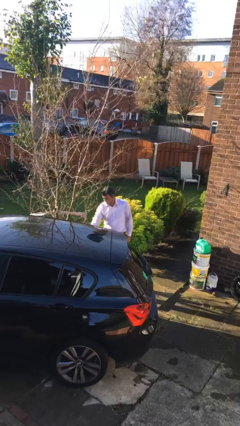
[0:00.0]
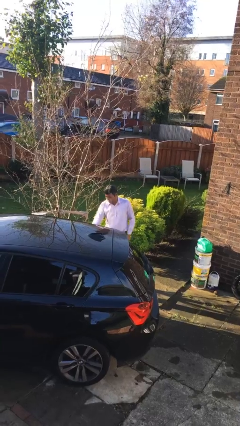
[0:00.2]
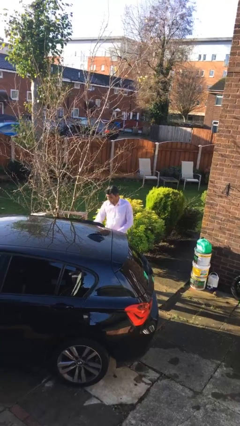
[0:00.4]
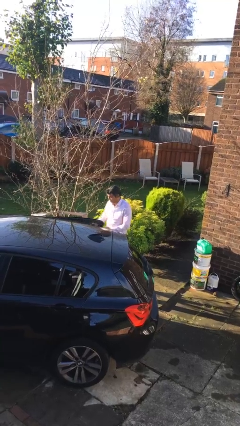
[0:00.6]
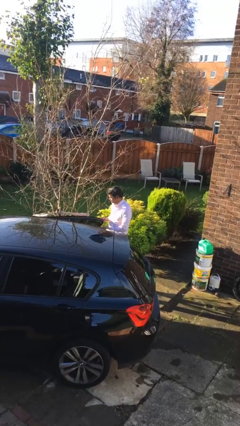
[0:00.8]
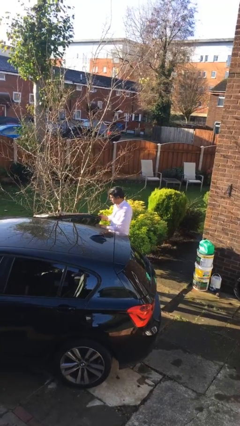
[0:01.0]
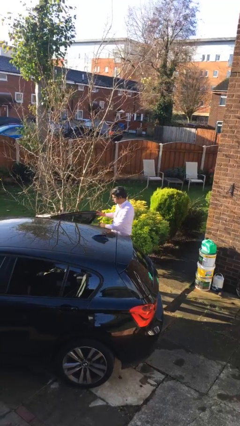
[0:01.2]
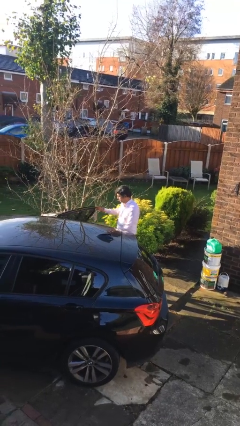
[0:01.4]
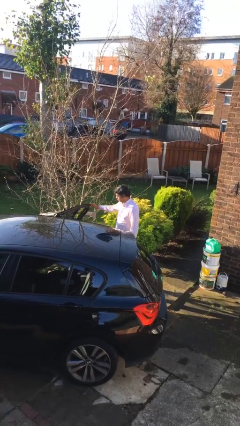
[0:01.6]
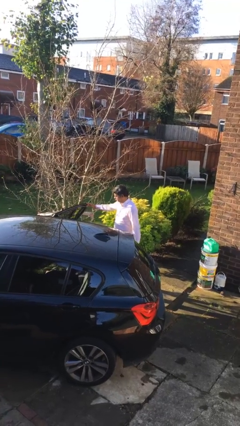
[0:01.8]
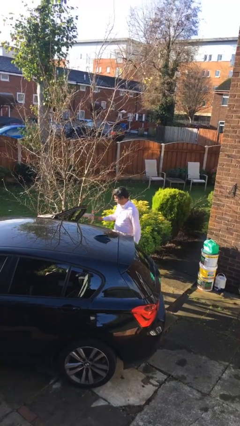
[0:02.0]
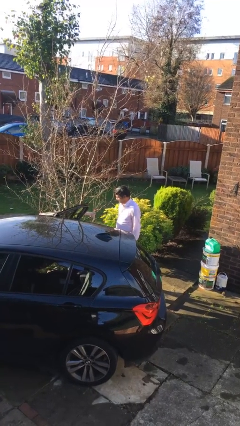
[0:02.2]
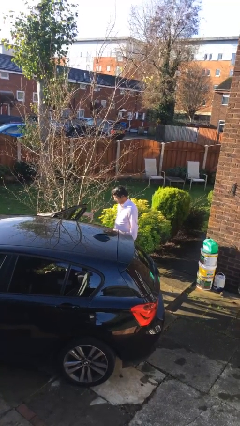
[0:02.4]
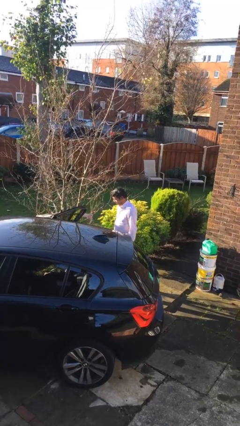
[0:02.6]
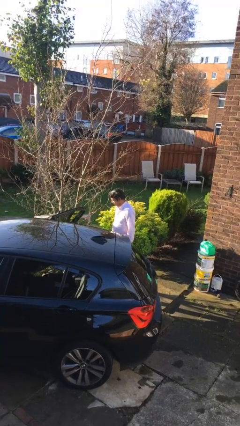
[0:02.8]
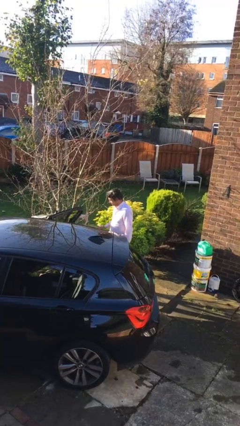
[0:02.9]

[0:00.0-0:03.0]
person opens car door

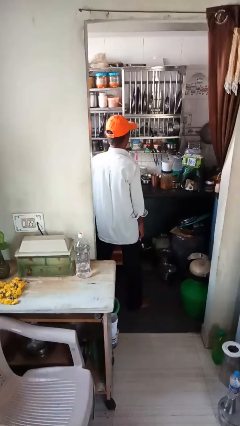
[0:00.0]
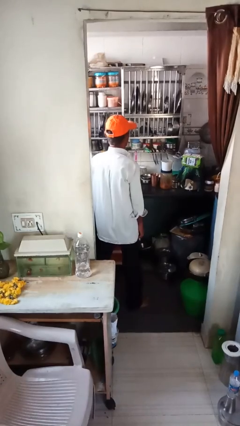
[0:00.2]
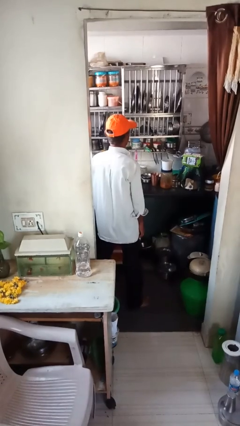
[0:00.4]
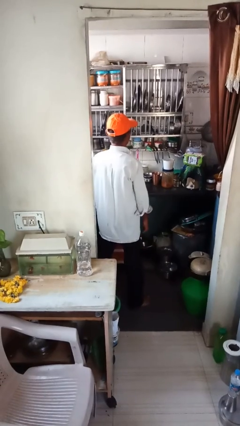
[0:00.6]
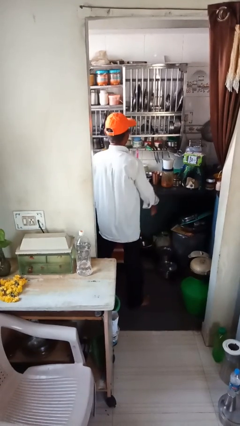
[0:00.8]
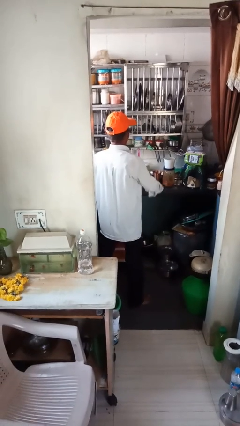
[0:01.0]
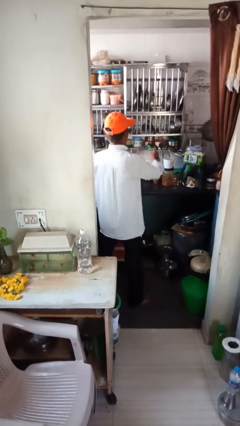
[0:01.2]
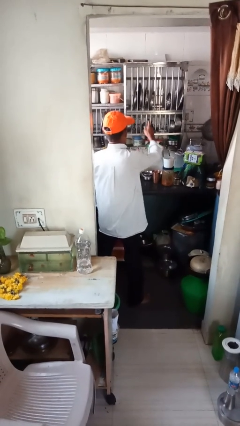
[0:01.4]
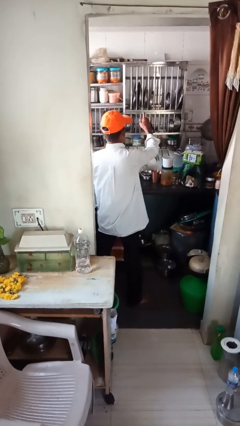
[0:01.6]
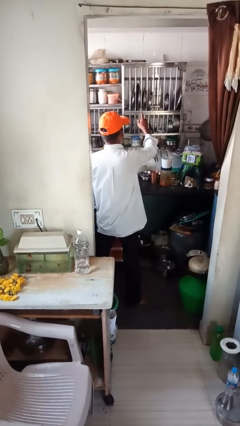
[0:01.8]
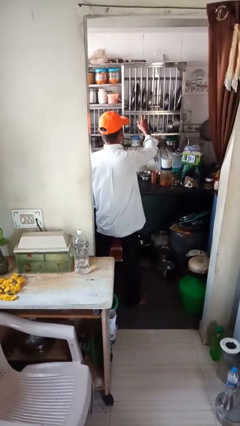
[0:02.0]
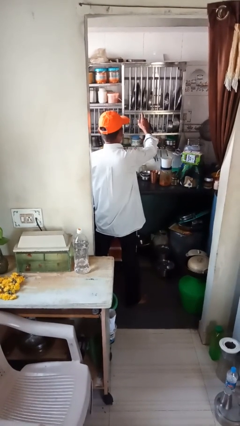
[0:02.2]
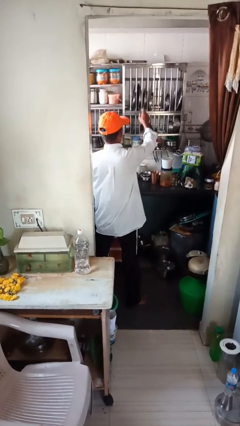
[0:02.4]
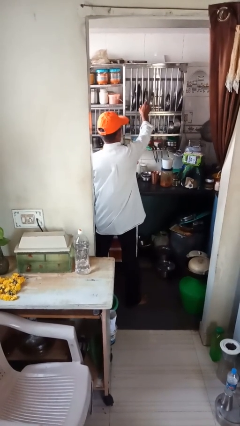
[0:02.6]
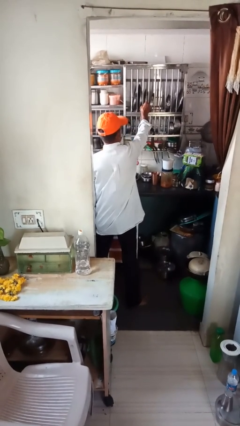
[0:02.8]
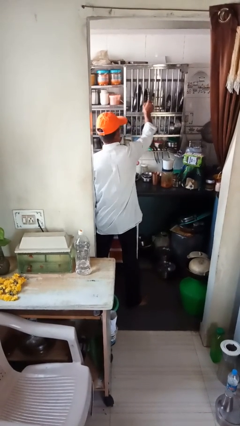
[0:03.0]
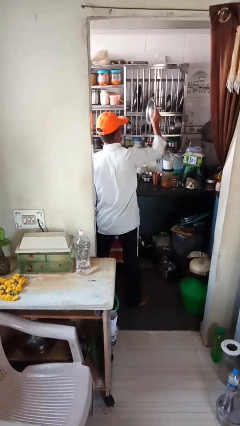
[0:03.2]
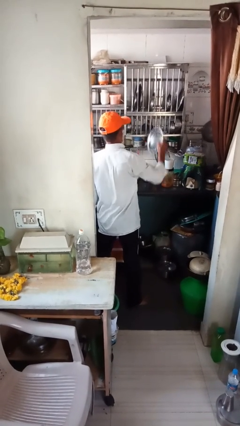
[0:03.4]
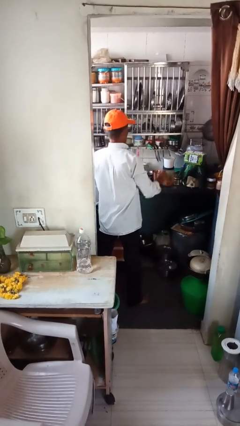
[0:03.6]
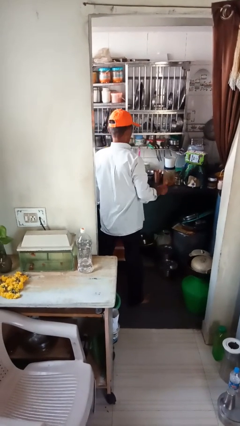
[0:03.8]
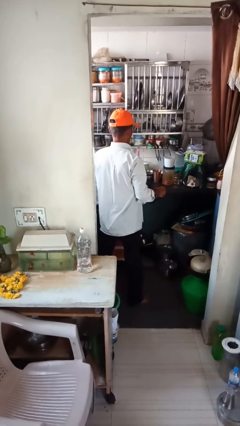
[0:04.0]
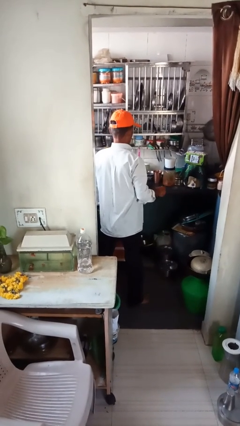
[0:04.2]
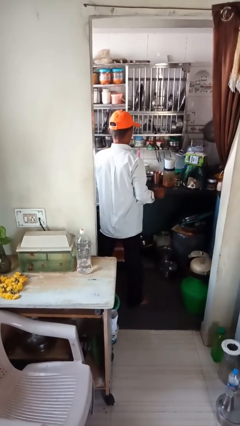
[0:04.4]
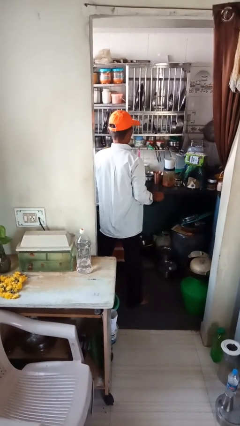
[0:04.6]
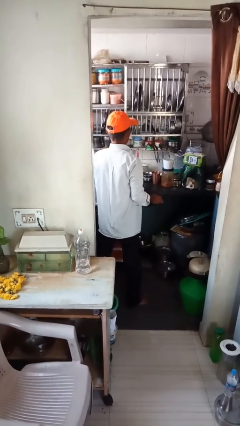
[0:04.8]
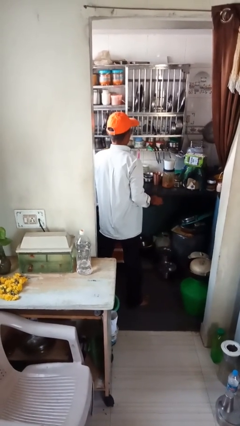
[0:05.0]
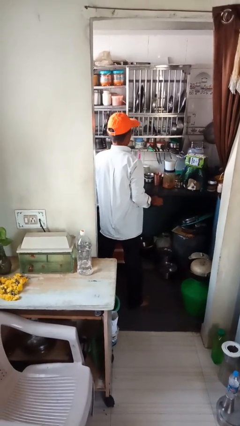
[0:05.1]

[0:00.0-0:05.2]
person takes object from cabinet

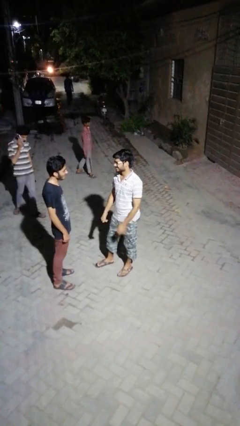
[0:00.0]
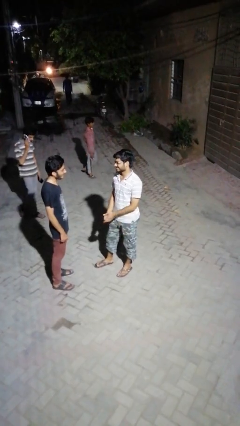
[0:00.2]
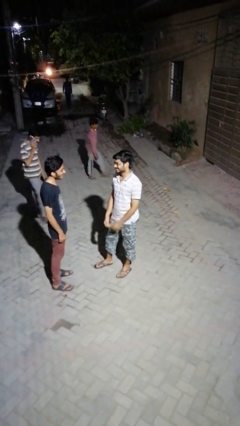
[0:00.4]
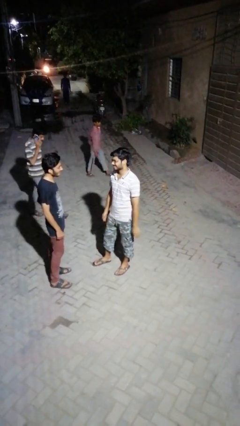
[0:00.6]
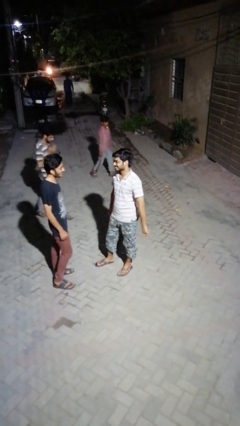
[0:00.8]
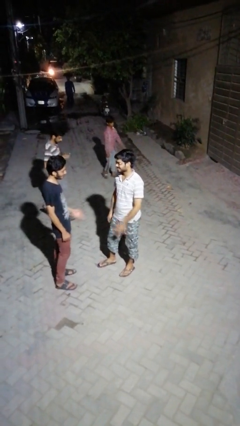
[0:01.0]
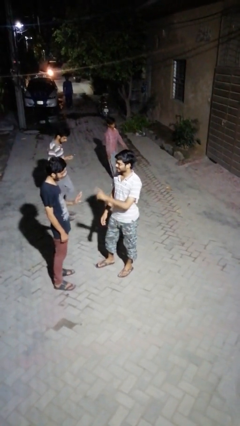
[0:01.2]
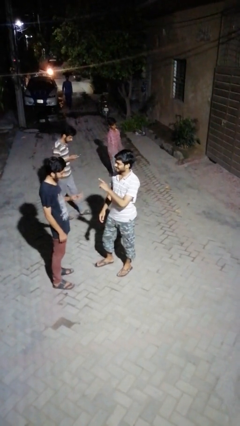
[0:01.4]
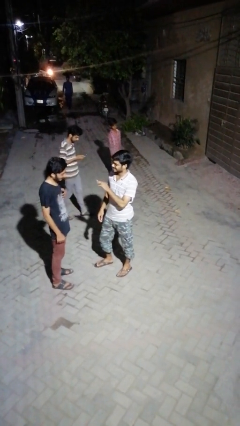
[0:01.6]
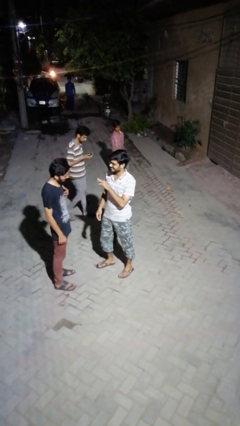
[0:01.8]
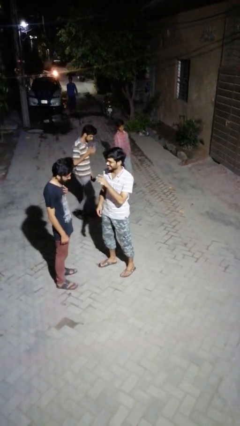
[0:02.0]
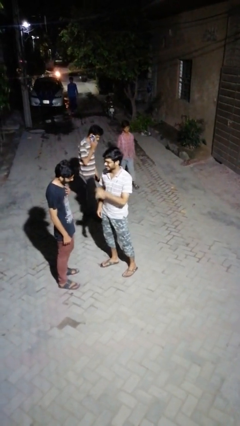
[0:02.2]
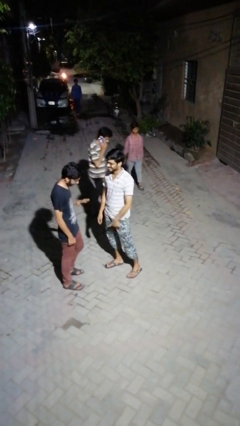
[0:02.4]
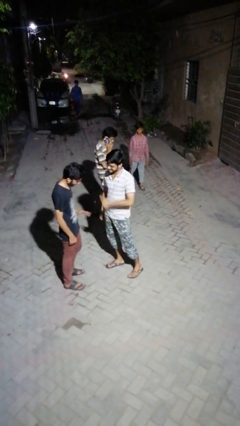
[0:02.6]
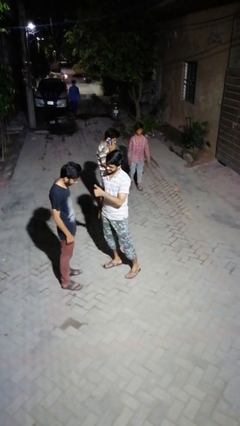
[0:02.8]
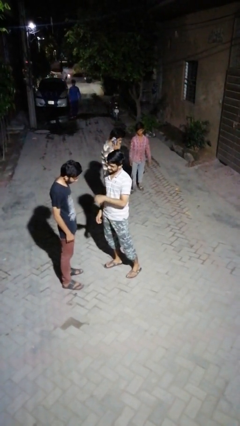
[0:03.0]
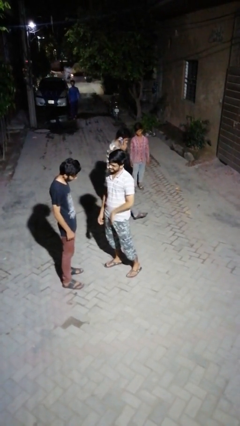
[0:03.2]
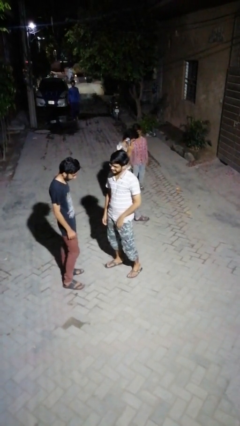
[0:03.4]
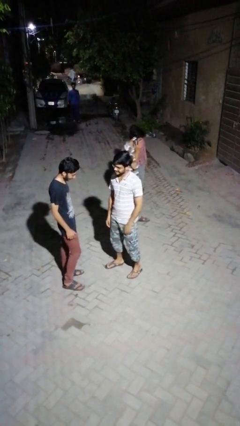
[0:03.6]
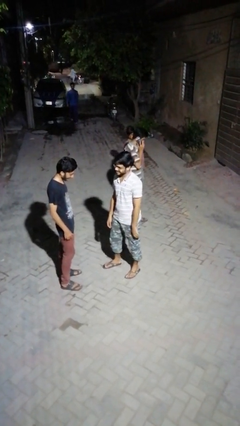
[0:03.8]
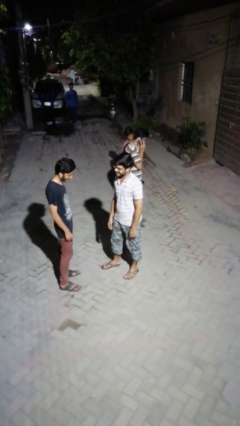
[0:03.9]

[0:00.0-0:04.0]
person talks to person

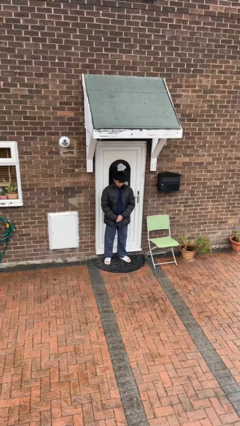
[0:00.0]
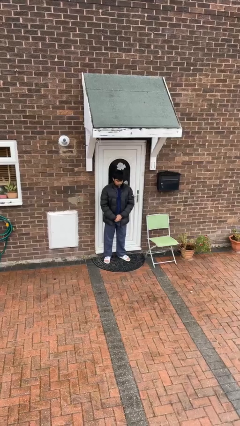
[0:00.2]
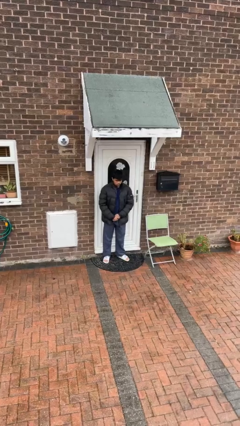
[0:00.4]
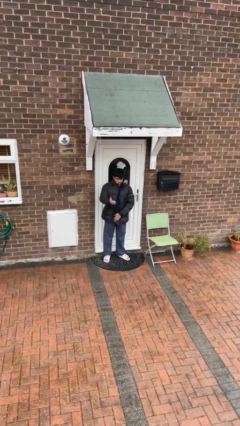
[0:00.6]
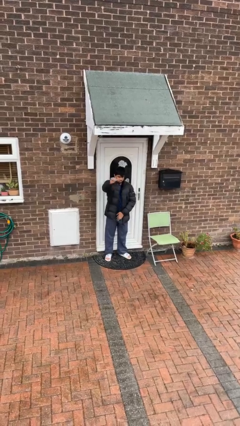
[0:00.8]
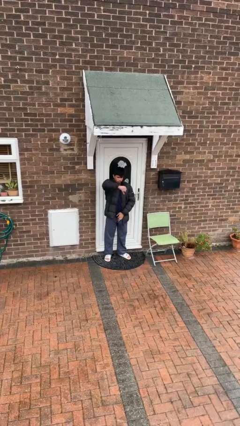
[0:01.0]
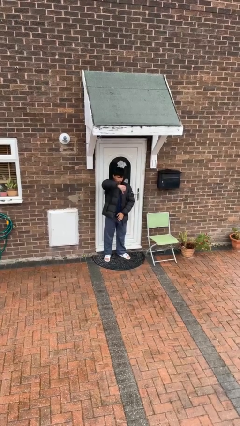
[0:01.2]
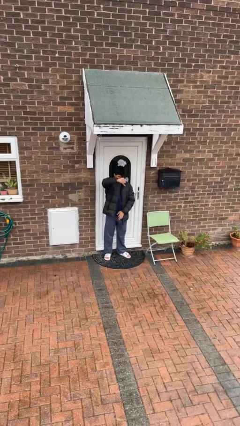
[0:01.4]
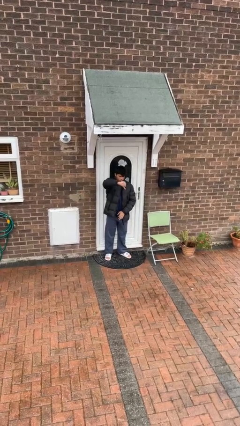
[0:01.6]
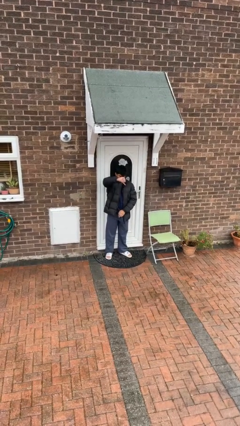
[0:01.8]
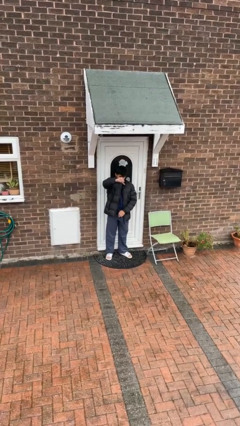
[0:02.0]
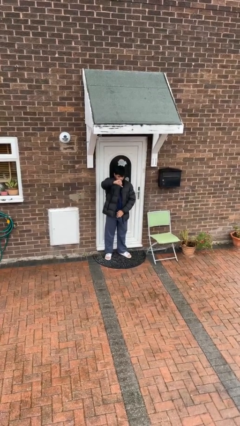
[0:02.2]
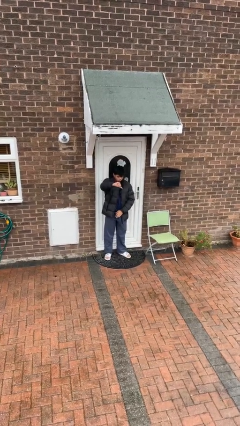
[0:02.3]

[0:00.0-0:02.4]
person gestures thumbs down

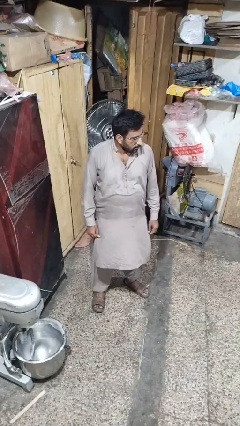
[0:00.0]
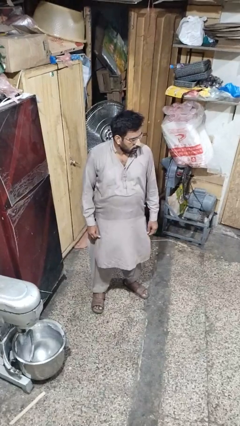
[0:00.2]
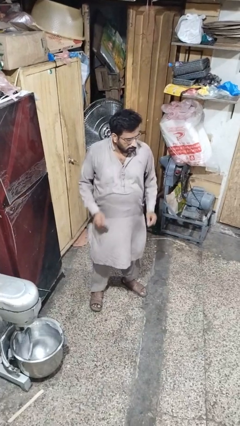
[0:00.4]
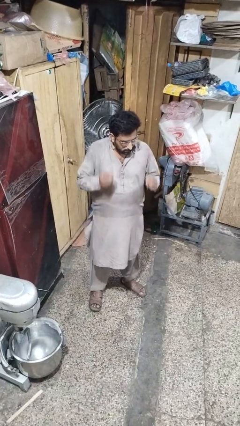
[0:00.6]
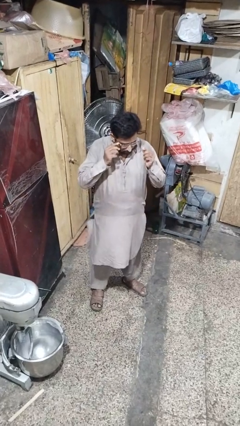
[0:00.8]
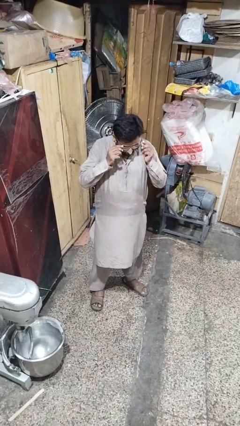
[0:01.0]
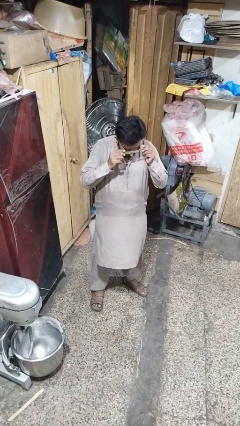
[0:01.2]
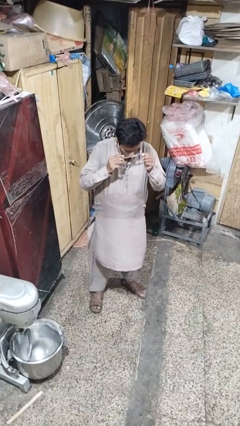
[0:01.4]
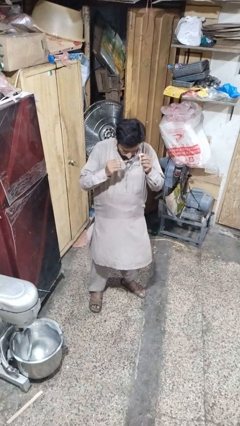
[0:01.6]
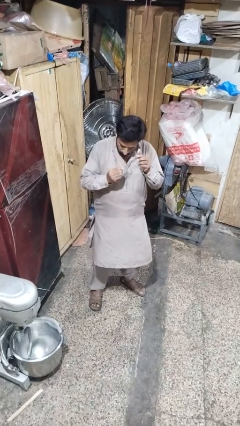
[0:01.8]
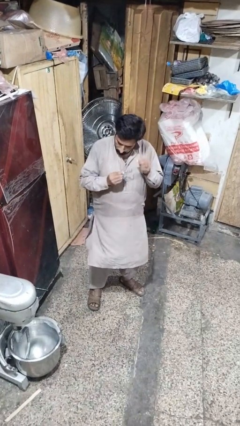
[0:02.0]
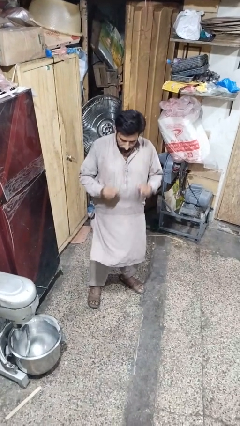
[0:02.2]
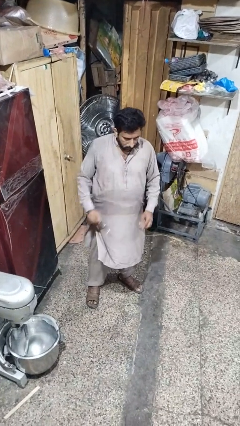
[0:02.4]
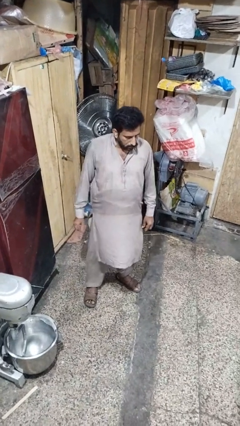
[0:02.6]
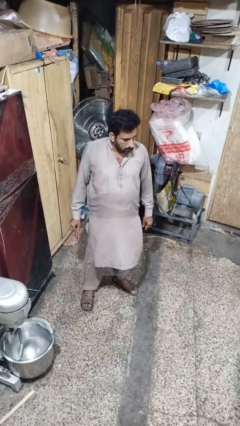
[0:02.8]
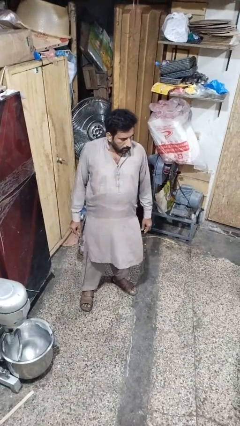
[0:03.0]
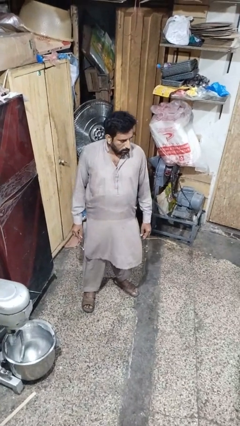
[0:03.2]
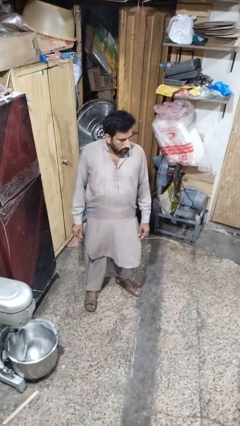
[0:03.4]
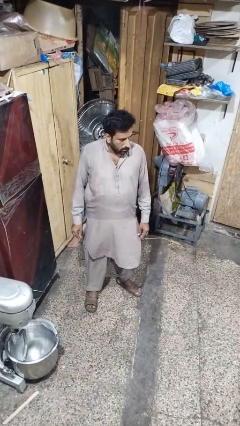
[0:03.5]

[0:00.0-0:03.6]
person takes off glasses
